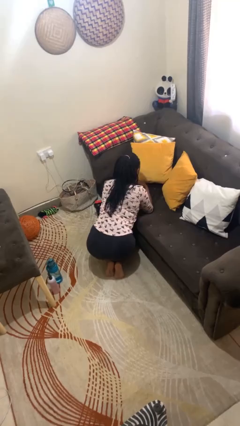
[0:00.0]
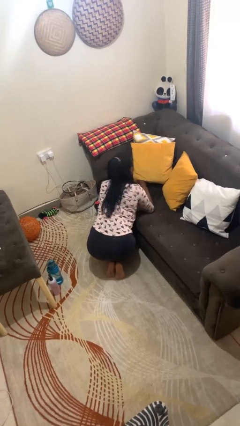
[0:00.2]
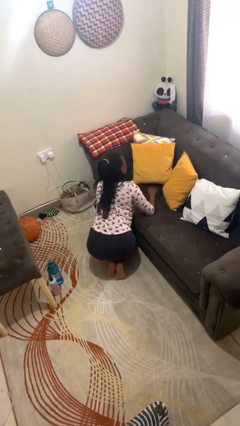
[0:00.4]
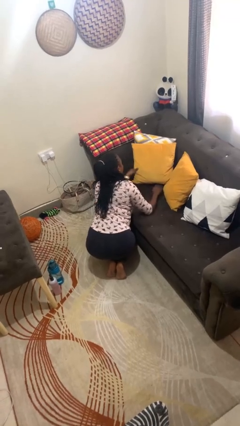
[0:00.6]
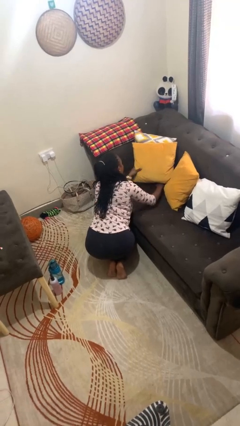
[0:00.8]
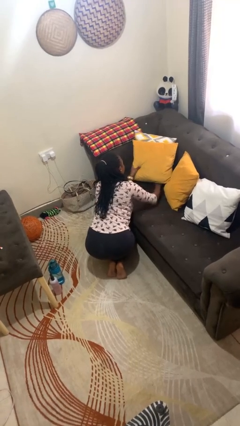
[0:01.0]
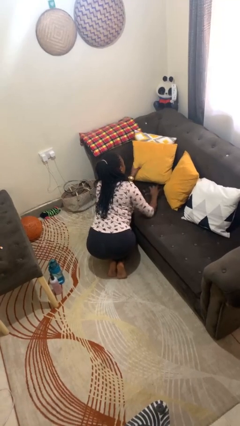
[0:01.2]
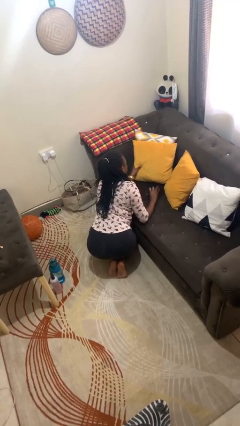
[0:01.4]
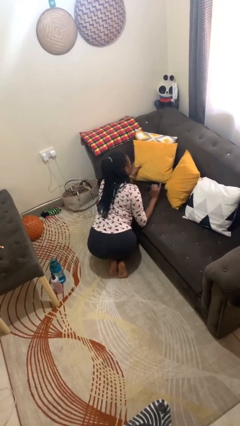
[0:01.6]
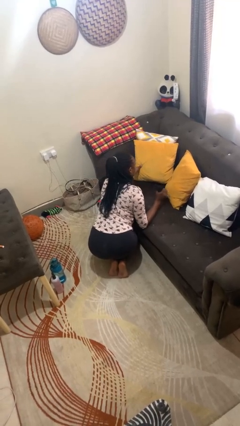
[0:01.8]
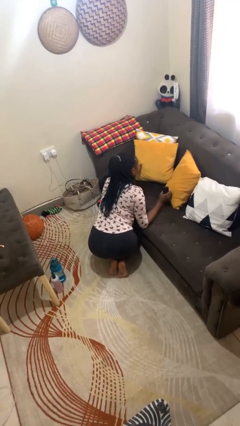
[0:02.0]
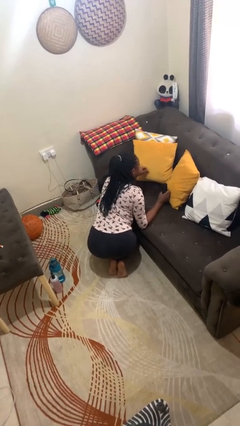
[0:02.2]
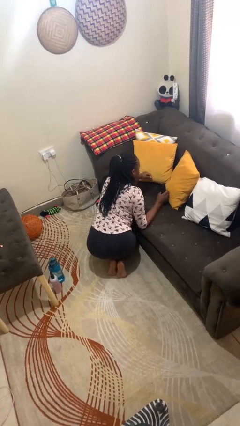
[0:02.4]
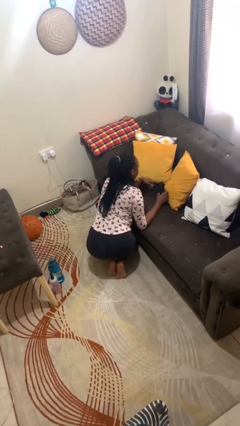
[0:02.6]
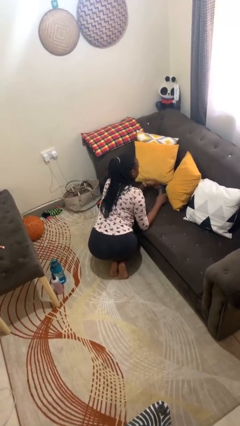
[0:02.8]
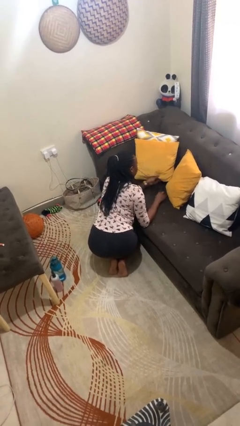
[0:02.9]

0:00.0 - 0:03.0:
person searches in couch

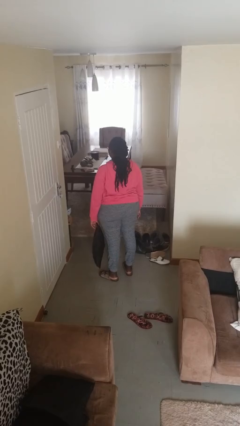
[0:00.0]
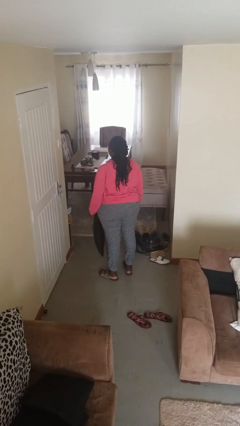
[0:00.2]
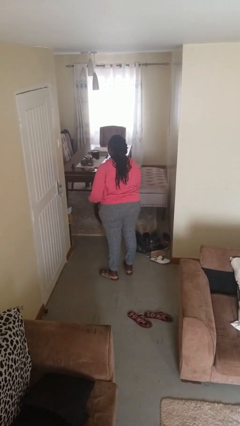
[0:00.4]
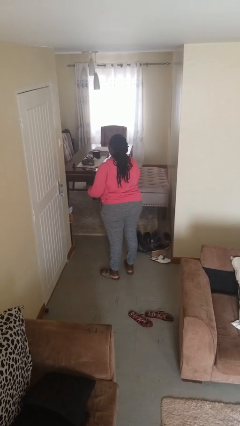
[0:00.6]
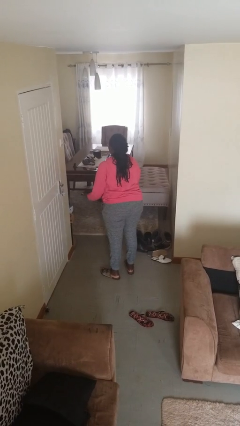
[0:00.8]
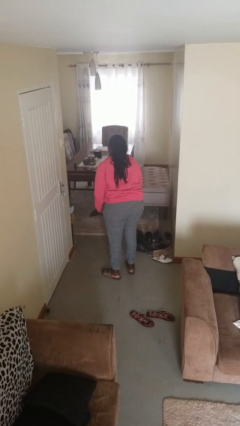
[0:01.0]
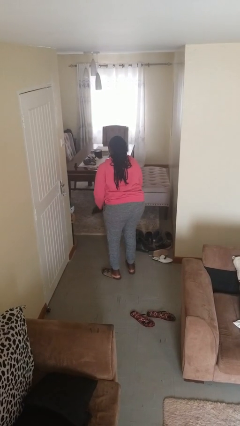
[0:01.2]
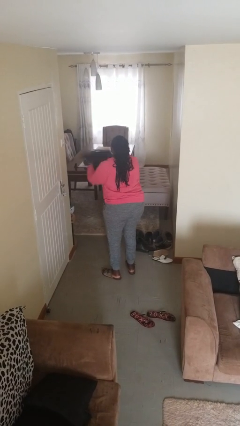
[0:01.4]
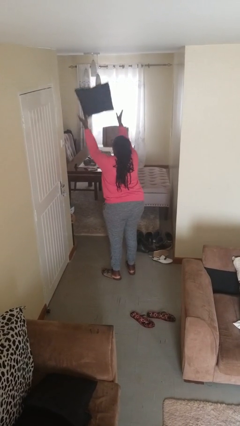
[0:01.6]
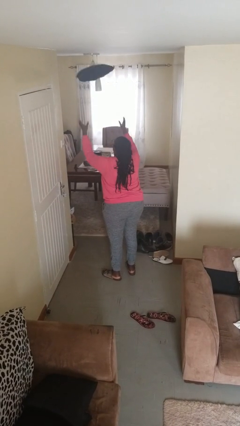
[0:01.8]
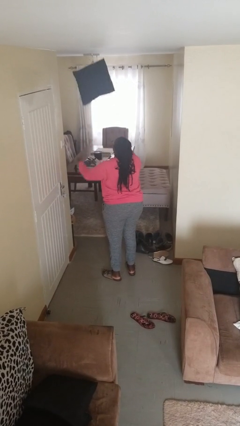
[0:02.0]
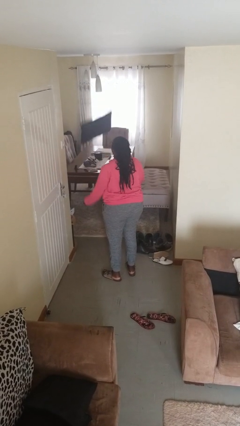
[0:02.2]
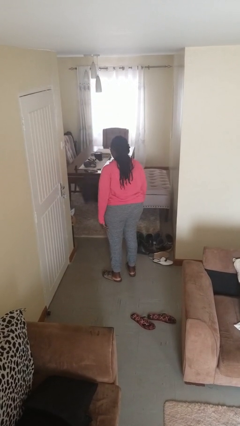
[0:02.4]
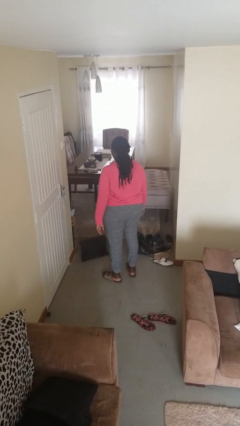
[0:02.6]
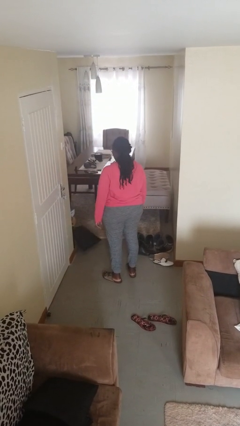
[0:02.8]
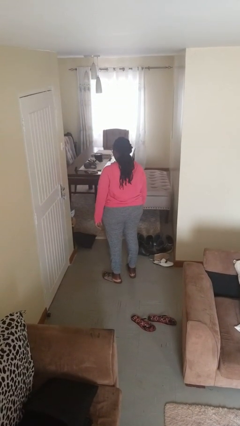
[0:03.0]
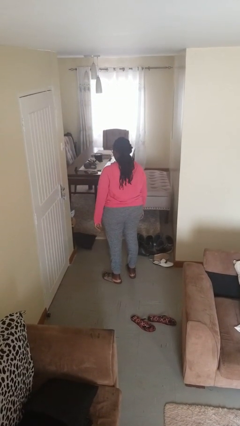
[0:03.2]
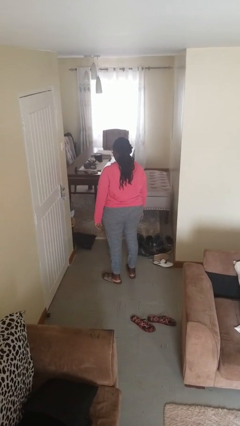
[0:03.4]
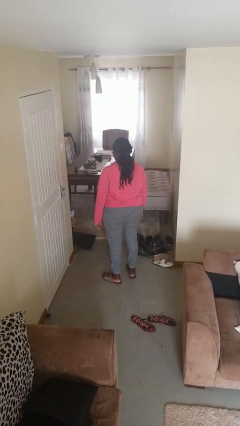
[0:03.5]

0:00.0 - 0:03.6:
person throws object into air

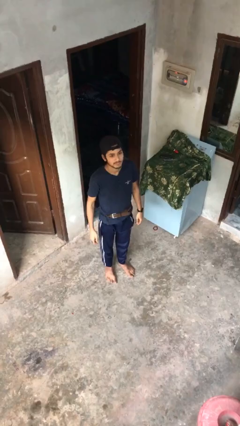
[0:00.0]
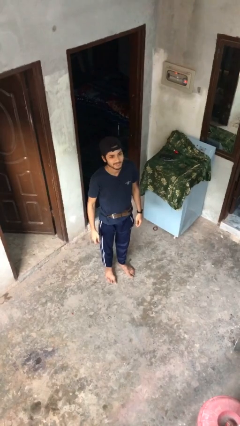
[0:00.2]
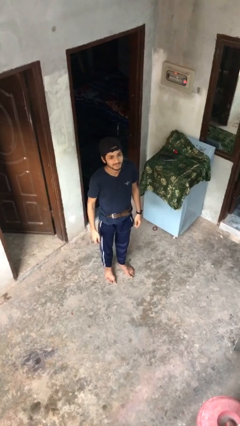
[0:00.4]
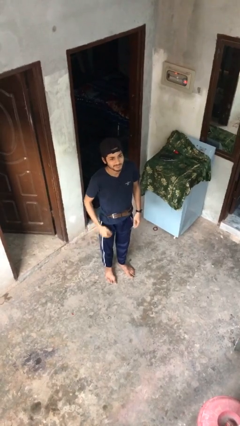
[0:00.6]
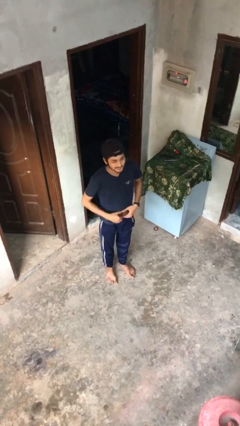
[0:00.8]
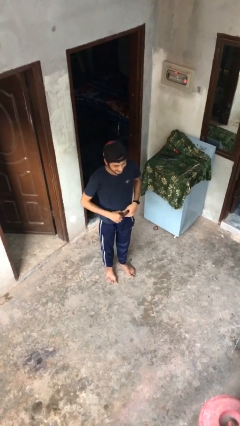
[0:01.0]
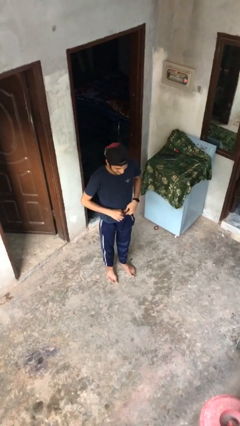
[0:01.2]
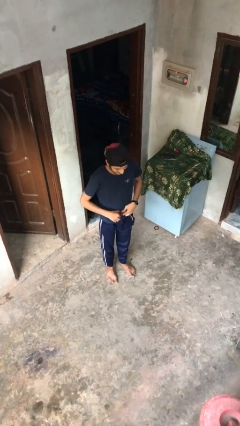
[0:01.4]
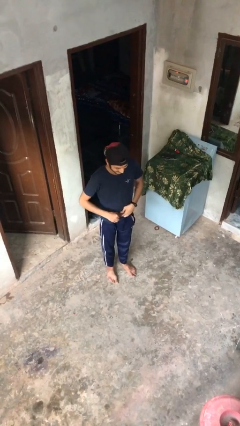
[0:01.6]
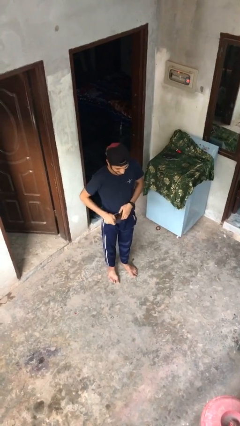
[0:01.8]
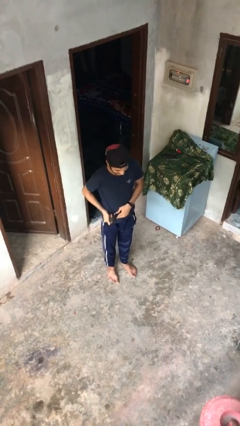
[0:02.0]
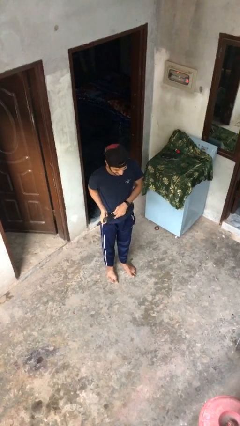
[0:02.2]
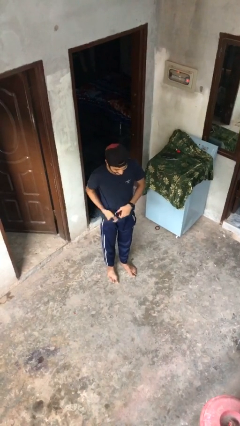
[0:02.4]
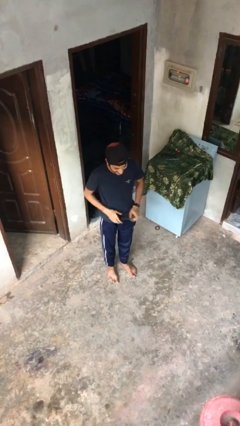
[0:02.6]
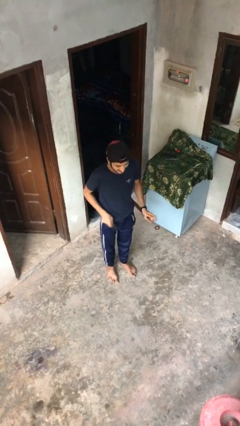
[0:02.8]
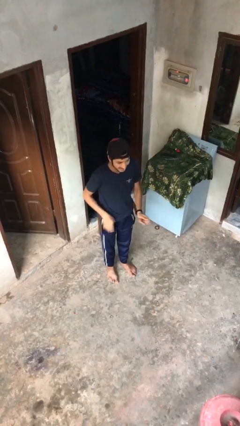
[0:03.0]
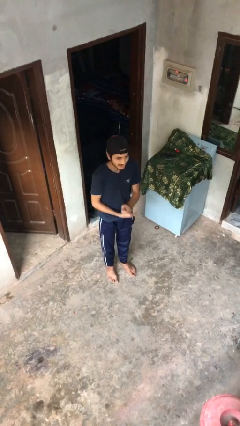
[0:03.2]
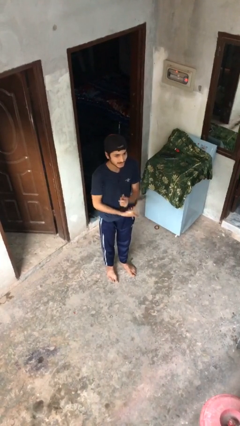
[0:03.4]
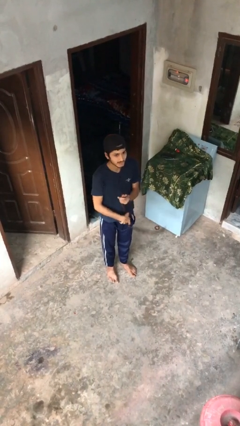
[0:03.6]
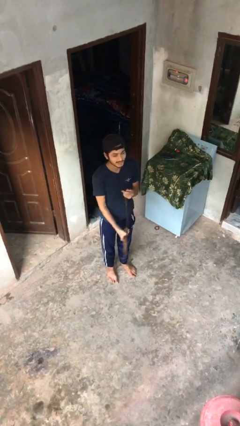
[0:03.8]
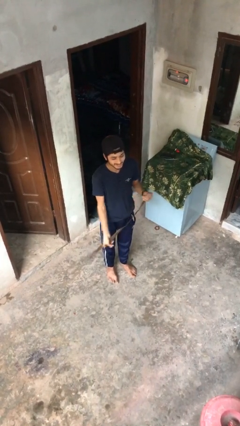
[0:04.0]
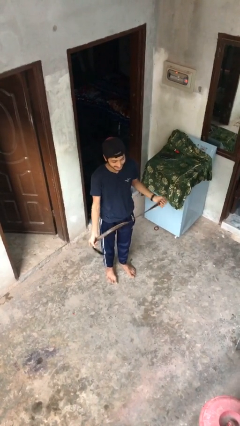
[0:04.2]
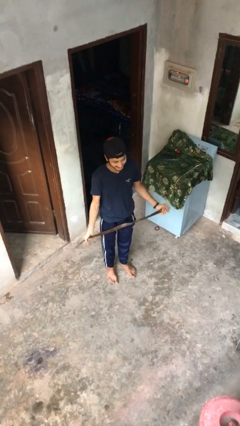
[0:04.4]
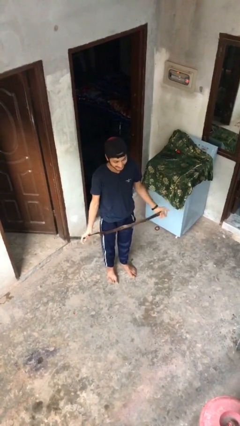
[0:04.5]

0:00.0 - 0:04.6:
person takes off belt

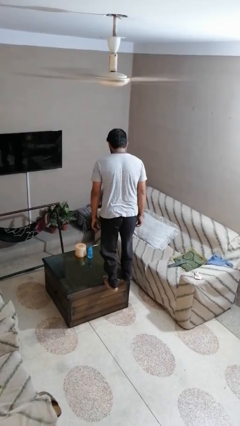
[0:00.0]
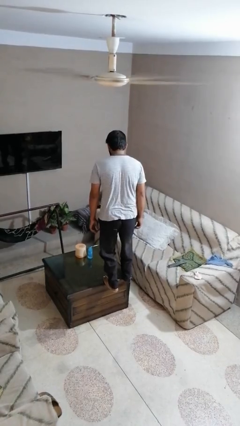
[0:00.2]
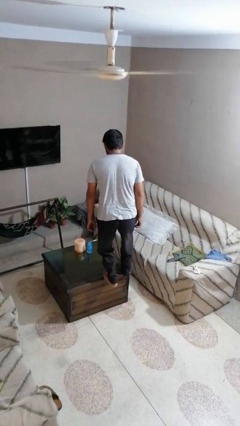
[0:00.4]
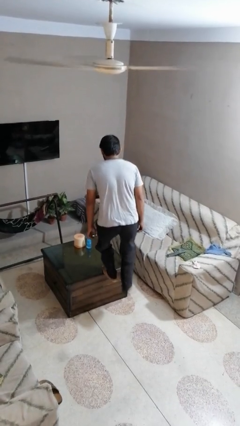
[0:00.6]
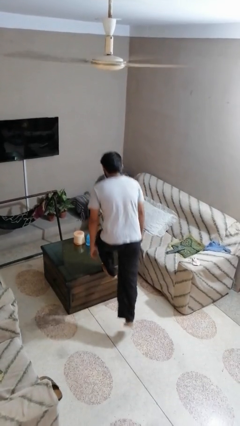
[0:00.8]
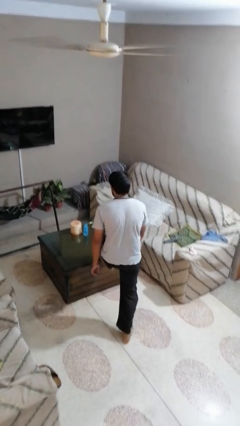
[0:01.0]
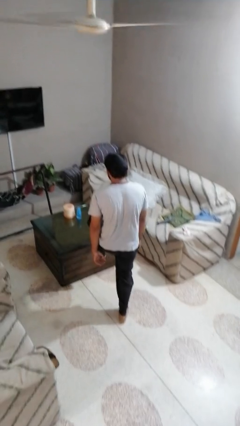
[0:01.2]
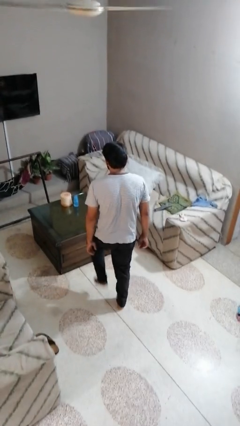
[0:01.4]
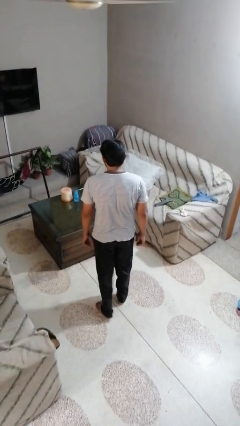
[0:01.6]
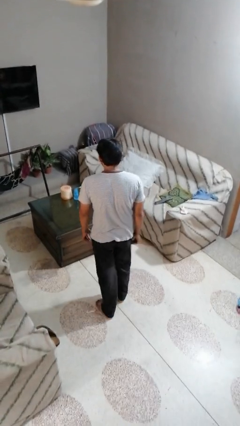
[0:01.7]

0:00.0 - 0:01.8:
person climbs off table

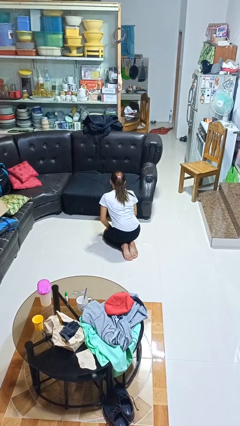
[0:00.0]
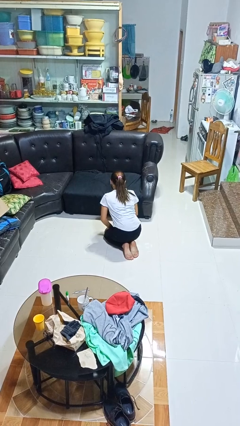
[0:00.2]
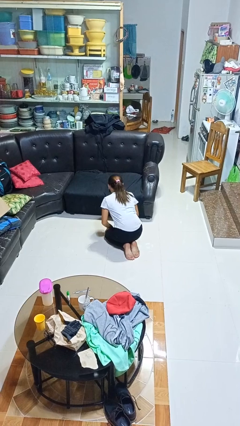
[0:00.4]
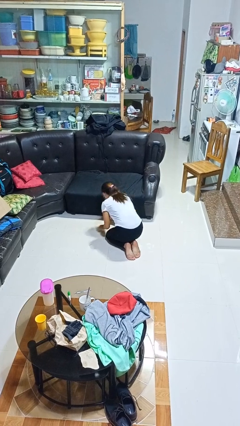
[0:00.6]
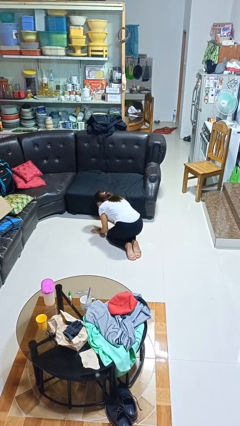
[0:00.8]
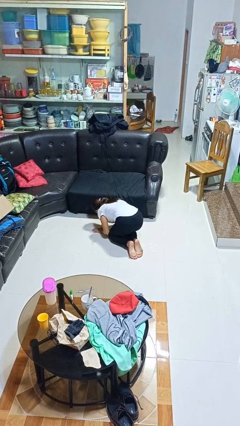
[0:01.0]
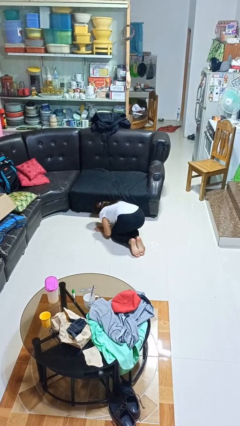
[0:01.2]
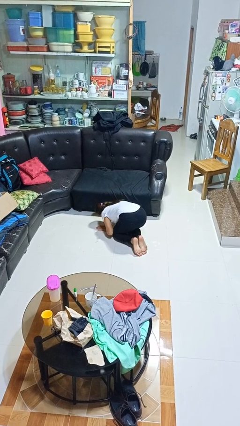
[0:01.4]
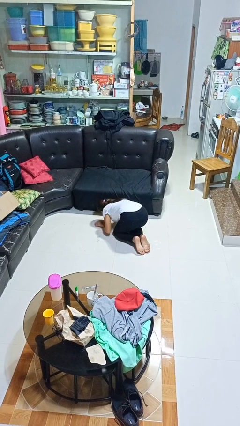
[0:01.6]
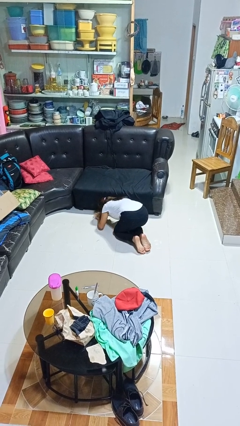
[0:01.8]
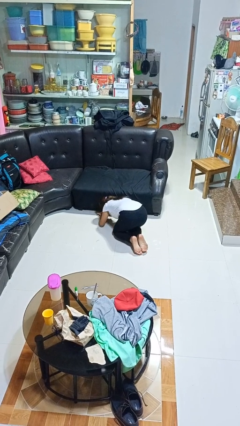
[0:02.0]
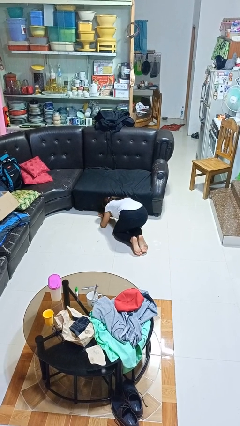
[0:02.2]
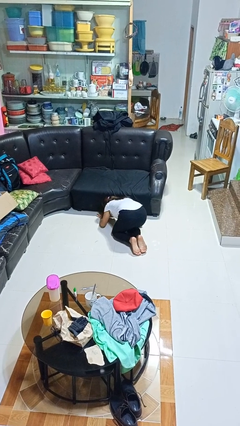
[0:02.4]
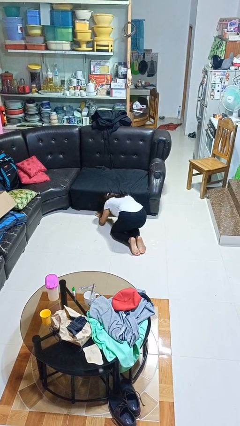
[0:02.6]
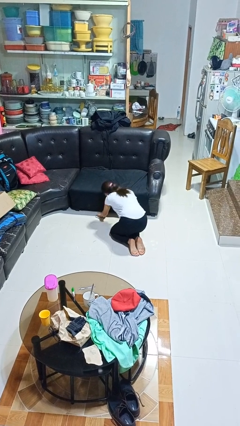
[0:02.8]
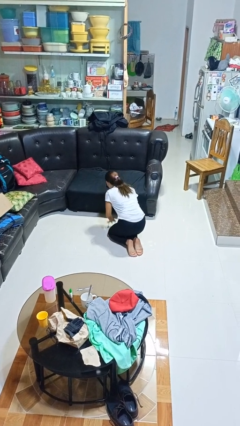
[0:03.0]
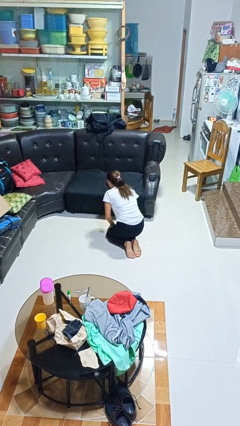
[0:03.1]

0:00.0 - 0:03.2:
person searches under couch

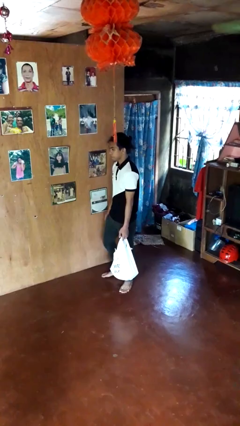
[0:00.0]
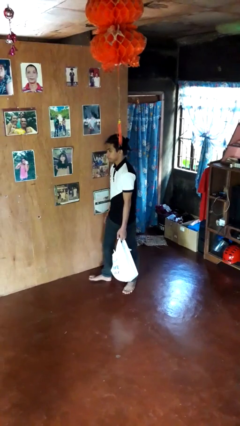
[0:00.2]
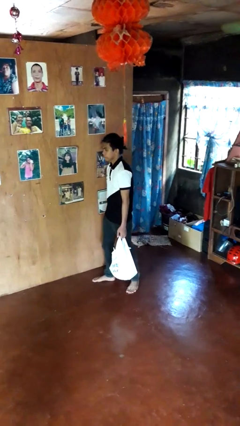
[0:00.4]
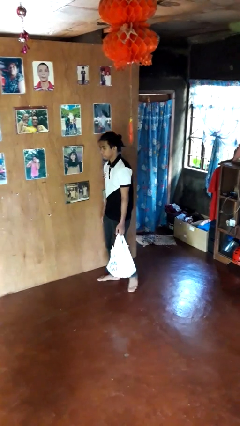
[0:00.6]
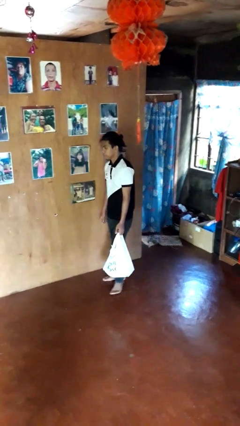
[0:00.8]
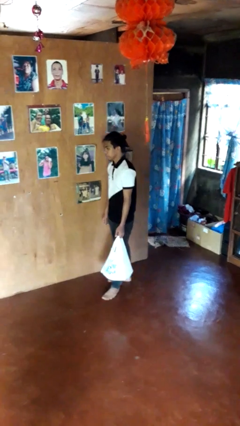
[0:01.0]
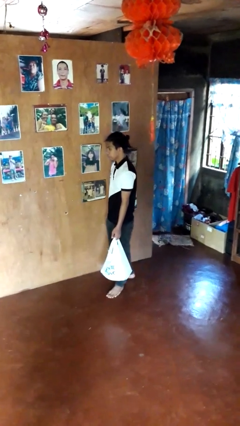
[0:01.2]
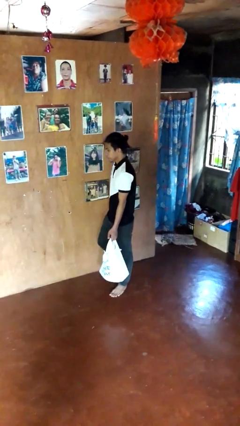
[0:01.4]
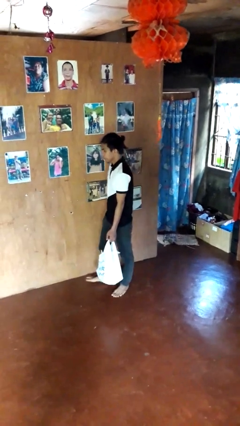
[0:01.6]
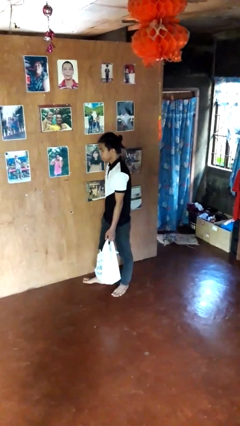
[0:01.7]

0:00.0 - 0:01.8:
person carries groceries
